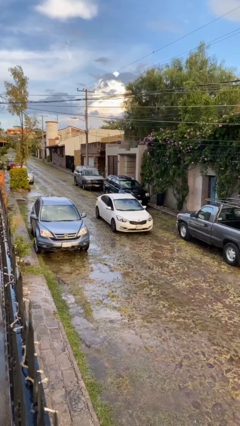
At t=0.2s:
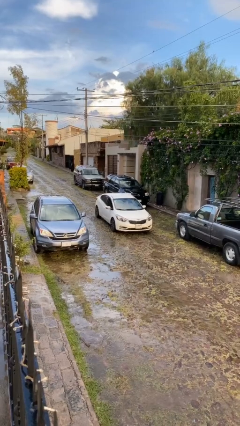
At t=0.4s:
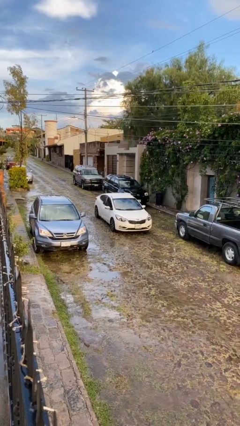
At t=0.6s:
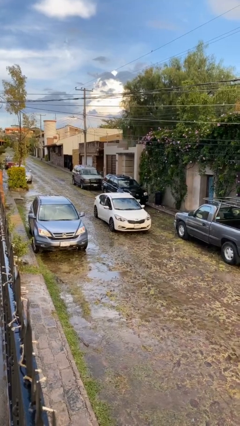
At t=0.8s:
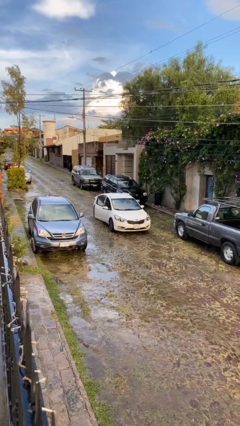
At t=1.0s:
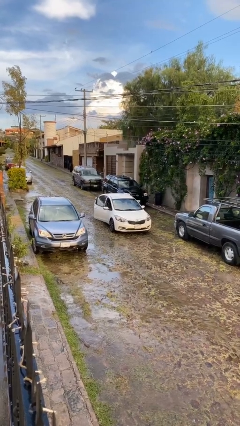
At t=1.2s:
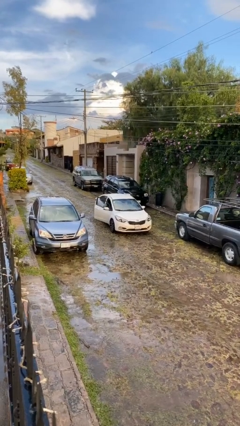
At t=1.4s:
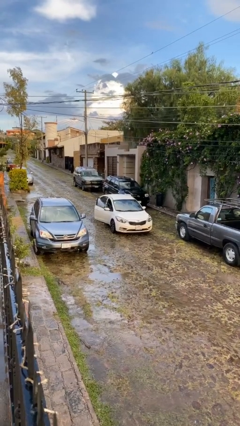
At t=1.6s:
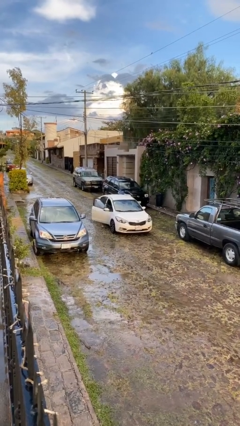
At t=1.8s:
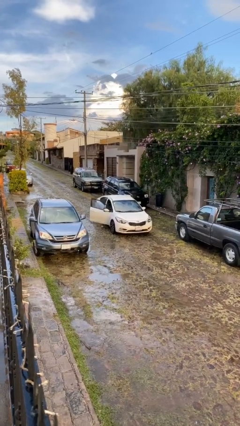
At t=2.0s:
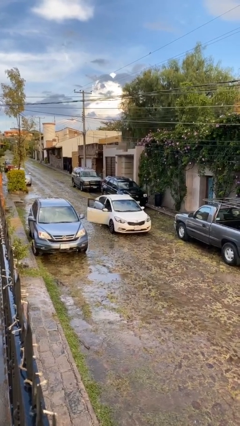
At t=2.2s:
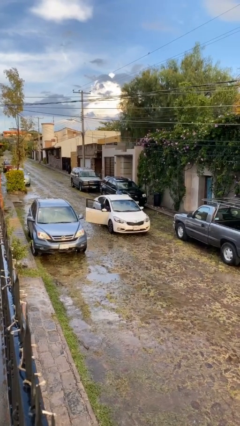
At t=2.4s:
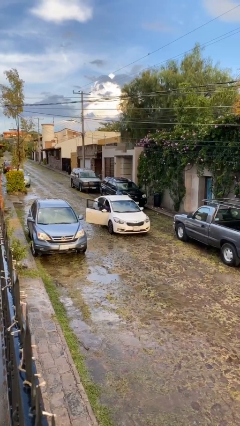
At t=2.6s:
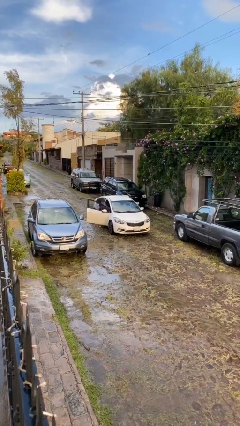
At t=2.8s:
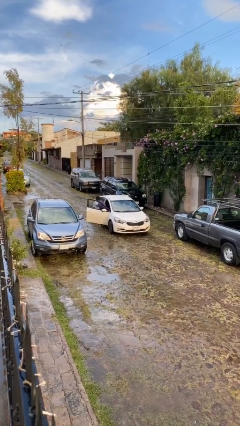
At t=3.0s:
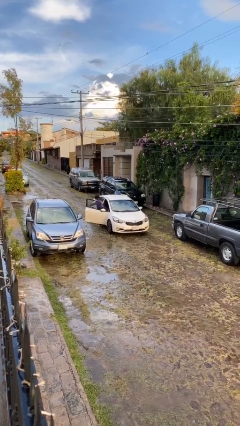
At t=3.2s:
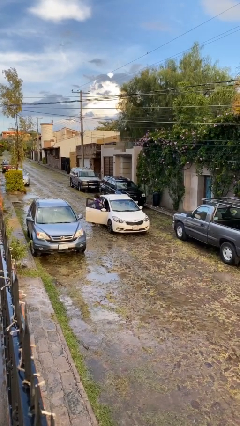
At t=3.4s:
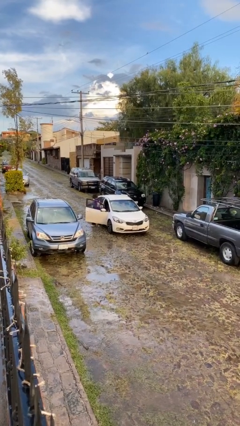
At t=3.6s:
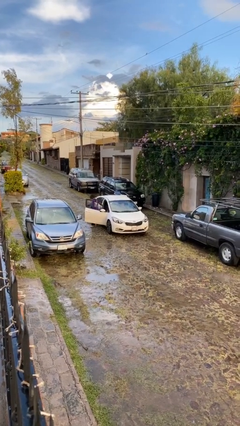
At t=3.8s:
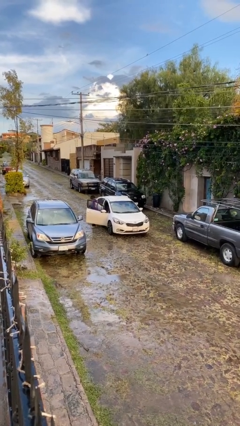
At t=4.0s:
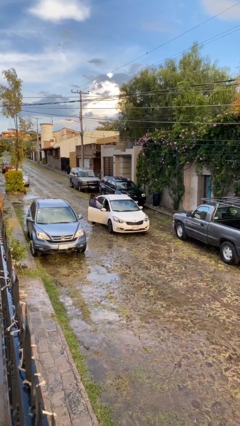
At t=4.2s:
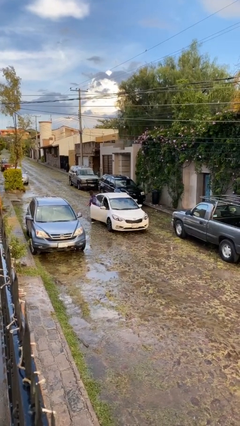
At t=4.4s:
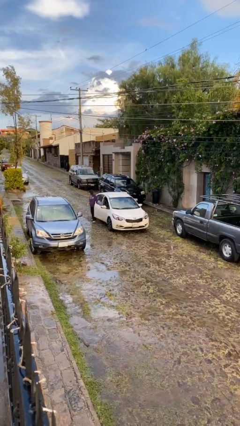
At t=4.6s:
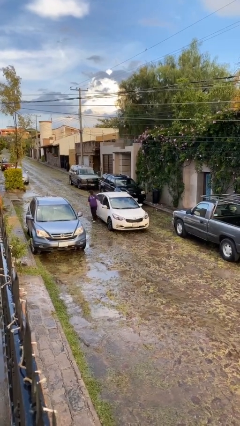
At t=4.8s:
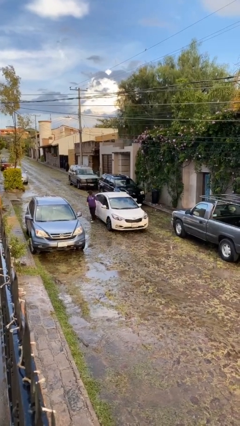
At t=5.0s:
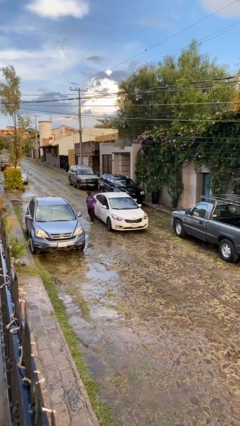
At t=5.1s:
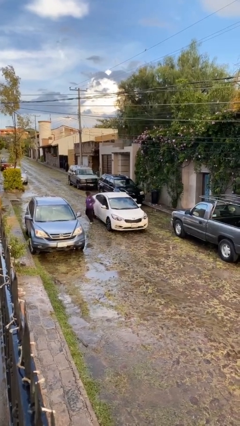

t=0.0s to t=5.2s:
car drops off person

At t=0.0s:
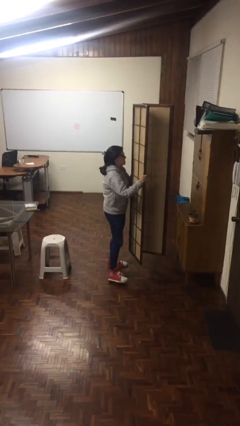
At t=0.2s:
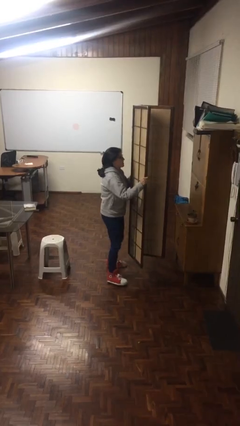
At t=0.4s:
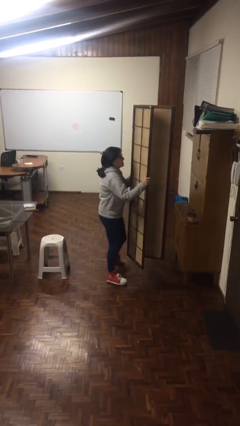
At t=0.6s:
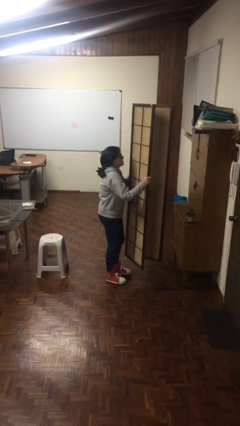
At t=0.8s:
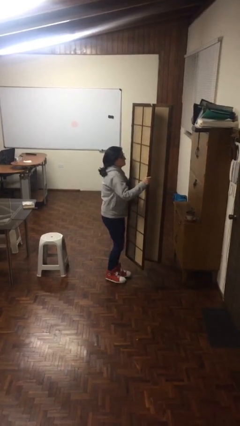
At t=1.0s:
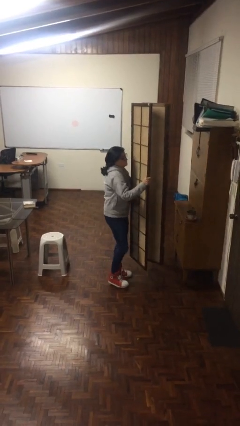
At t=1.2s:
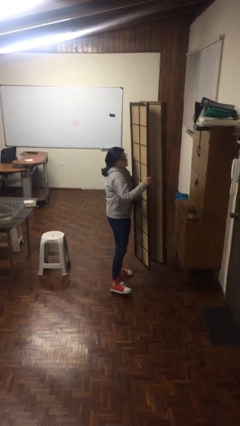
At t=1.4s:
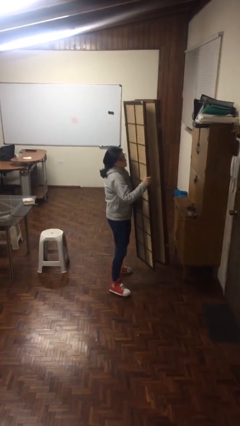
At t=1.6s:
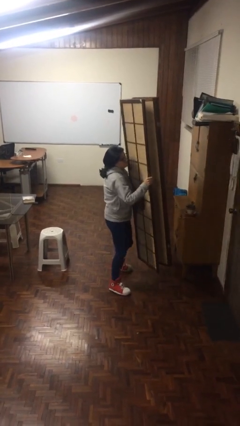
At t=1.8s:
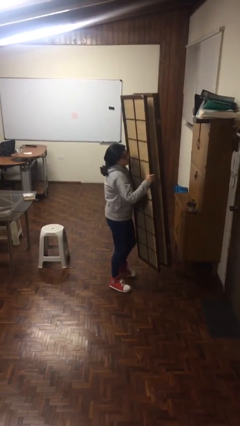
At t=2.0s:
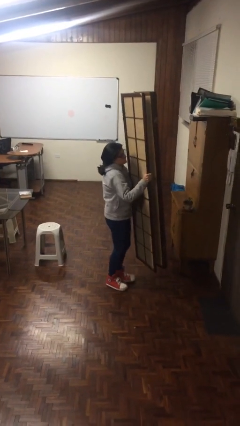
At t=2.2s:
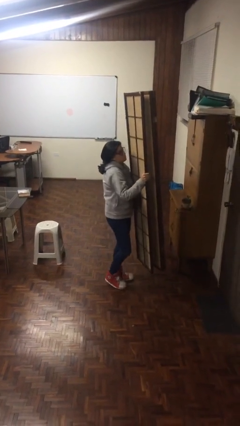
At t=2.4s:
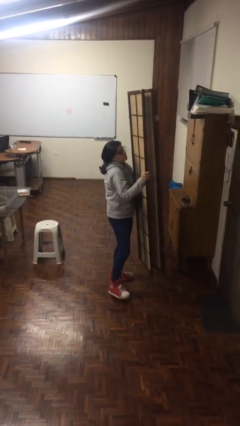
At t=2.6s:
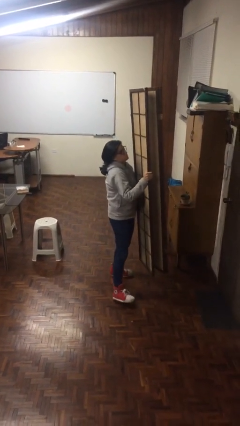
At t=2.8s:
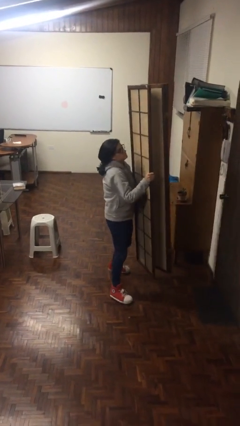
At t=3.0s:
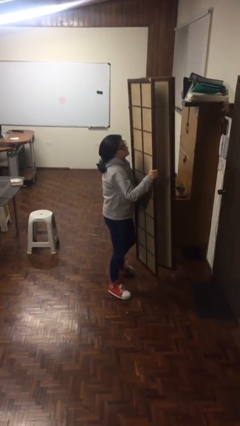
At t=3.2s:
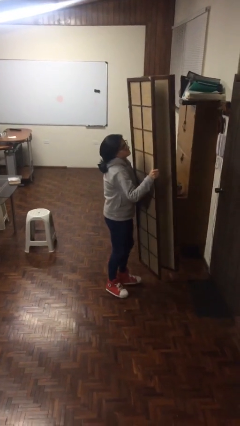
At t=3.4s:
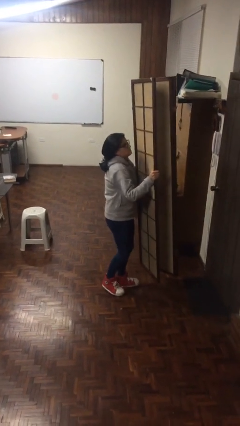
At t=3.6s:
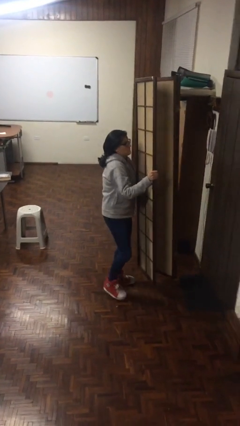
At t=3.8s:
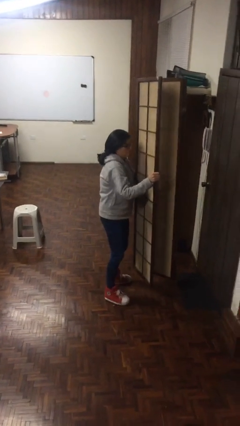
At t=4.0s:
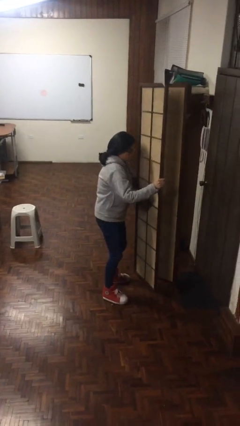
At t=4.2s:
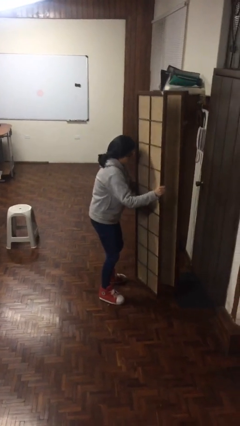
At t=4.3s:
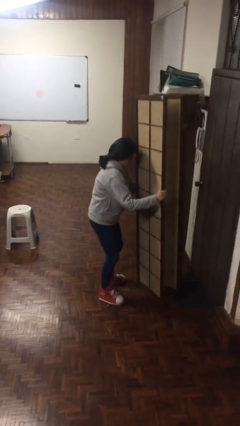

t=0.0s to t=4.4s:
person carries heavy object

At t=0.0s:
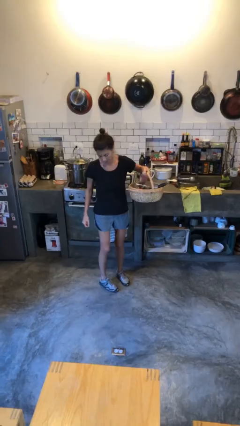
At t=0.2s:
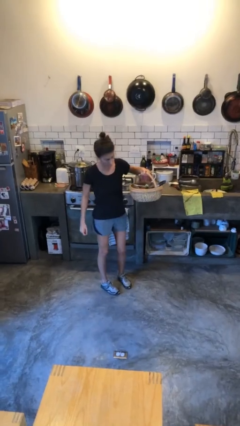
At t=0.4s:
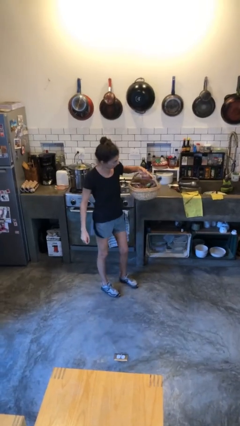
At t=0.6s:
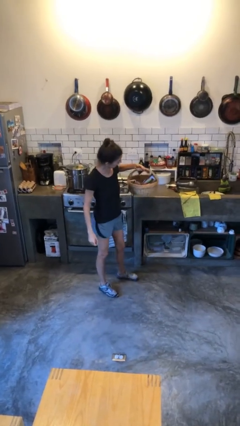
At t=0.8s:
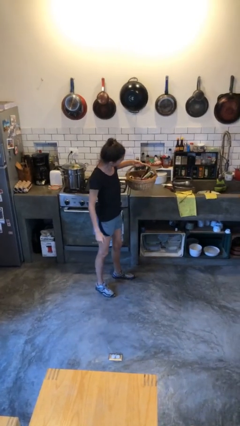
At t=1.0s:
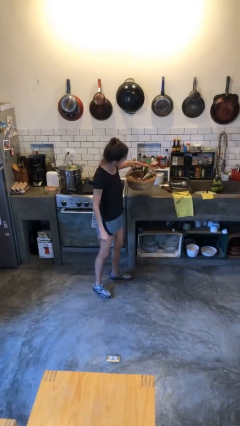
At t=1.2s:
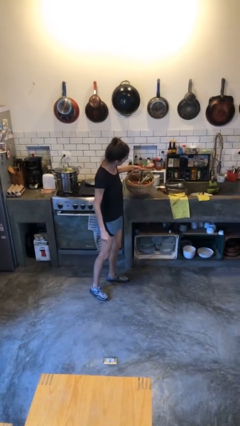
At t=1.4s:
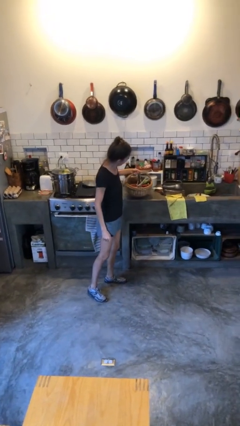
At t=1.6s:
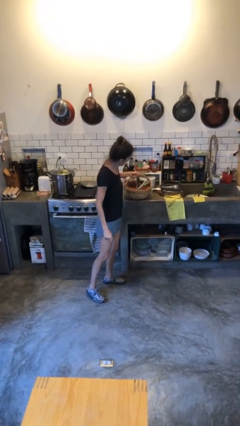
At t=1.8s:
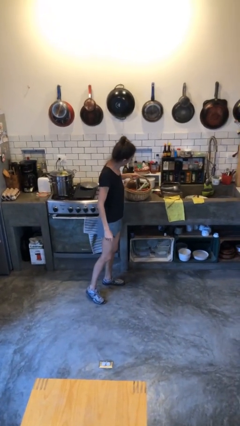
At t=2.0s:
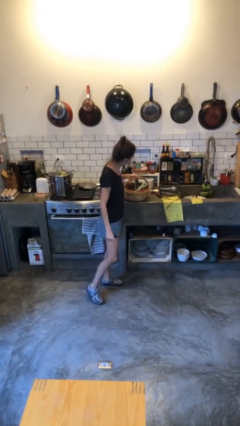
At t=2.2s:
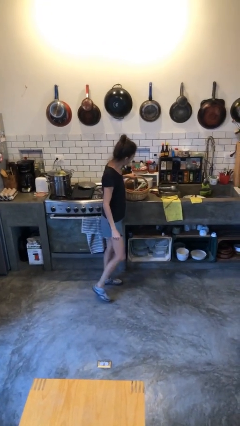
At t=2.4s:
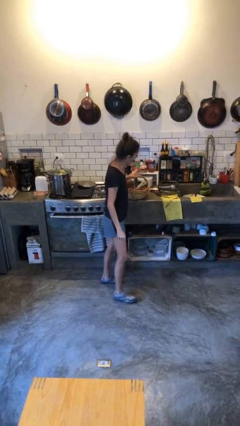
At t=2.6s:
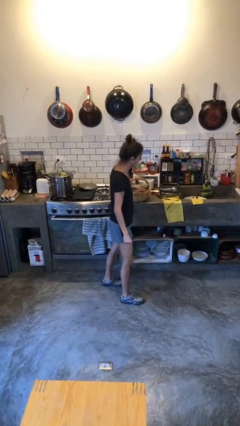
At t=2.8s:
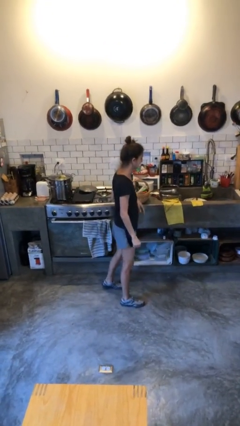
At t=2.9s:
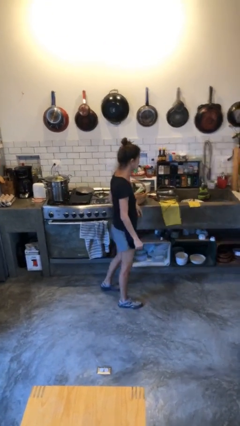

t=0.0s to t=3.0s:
person puts down object on countertop

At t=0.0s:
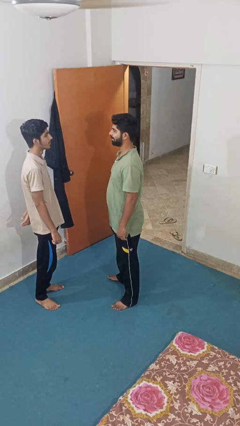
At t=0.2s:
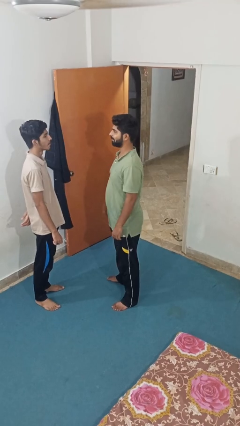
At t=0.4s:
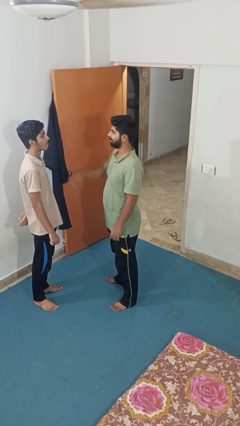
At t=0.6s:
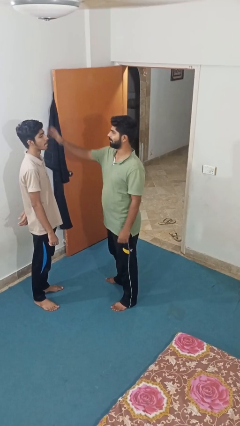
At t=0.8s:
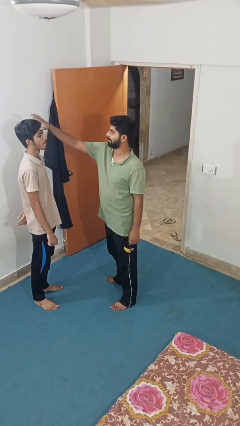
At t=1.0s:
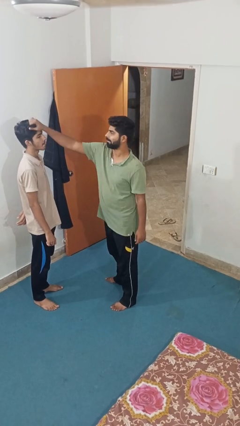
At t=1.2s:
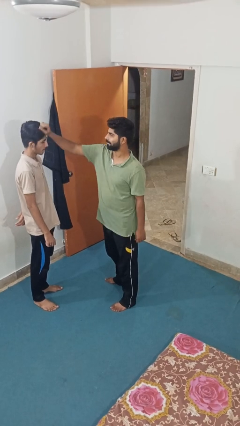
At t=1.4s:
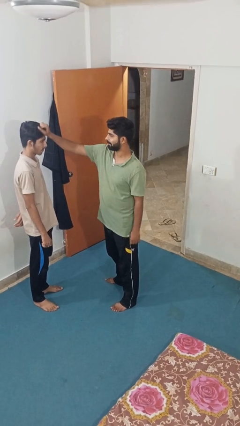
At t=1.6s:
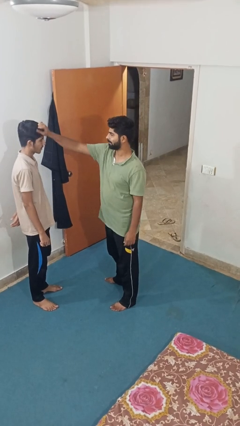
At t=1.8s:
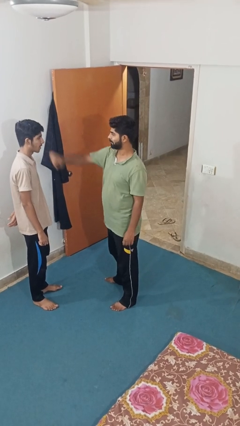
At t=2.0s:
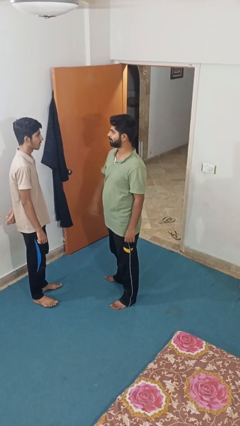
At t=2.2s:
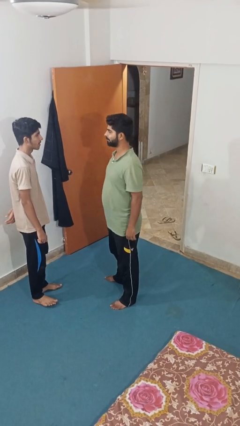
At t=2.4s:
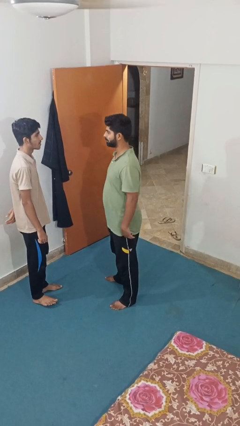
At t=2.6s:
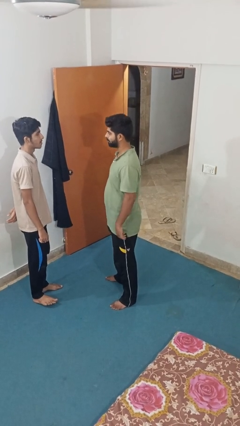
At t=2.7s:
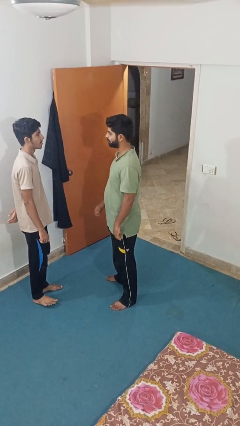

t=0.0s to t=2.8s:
person grabs person by hair

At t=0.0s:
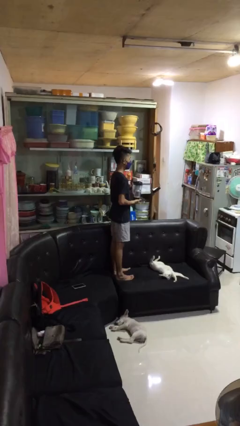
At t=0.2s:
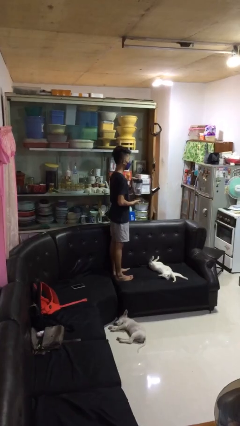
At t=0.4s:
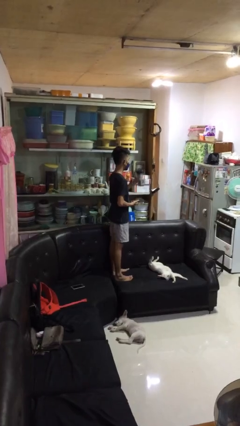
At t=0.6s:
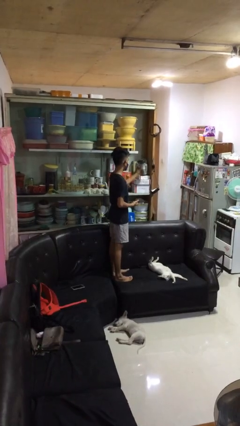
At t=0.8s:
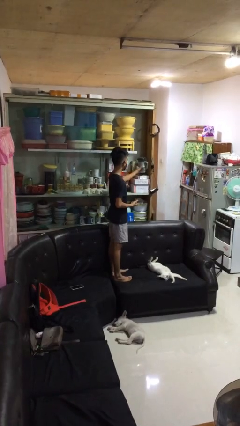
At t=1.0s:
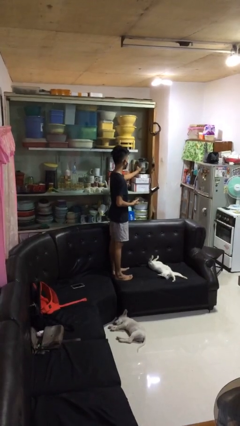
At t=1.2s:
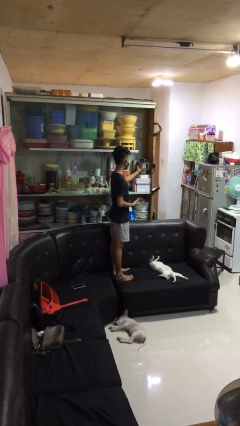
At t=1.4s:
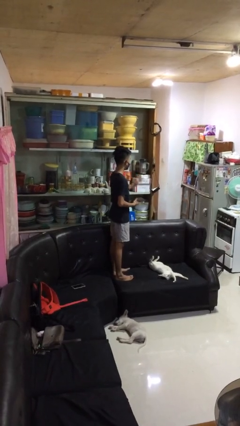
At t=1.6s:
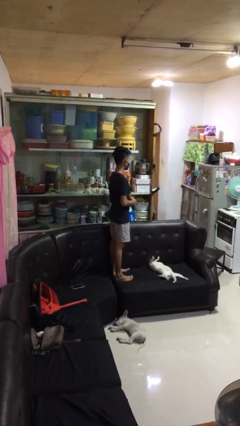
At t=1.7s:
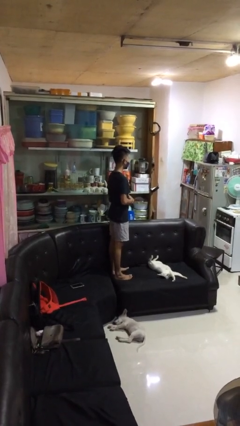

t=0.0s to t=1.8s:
person puts down object into cabinet

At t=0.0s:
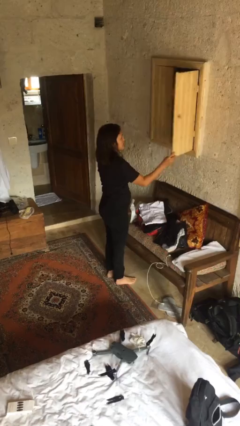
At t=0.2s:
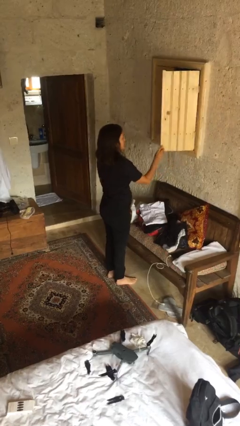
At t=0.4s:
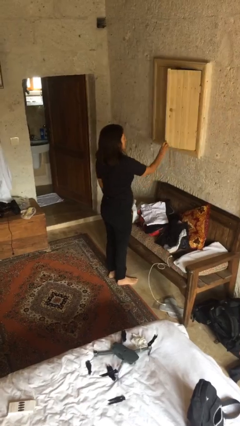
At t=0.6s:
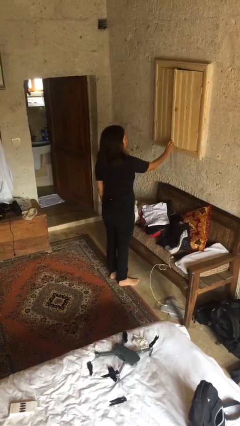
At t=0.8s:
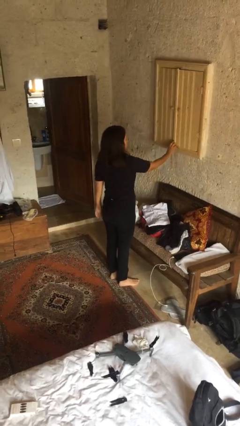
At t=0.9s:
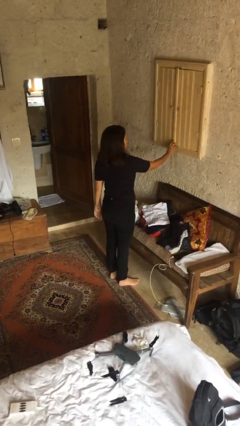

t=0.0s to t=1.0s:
person closes dresser drawer
